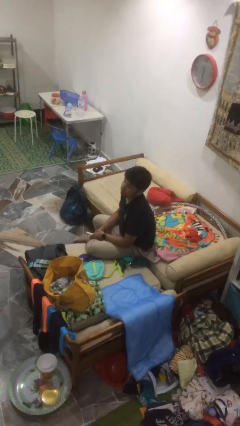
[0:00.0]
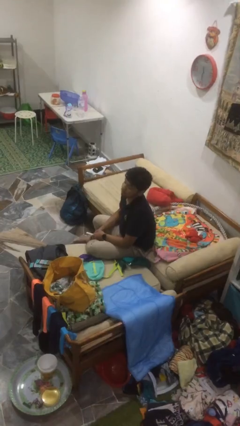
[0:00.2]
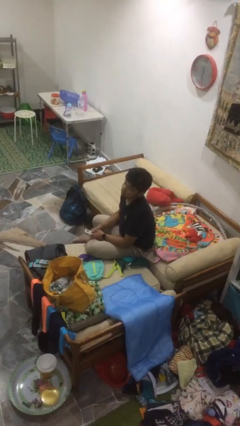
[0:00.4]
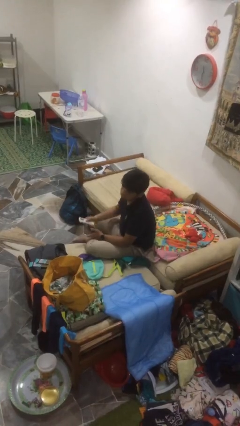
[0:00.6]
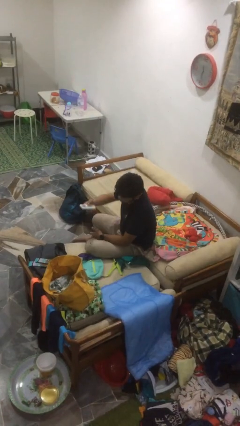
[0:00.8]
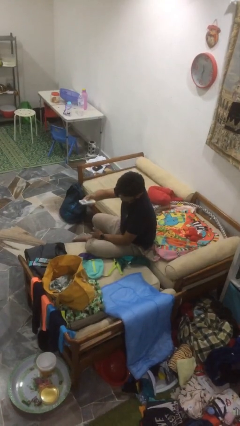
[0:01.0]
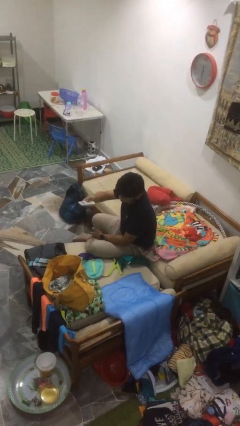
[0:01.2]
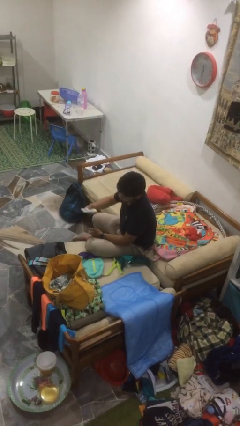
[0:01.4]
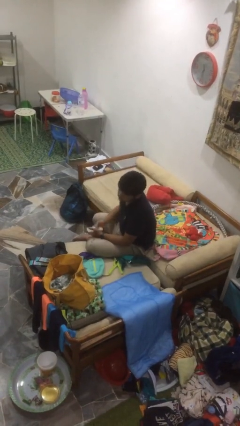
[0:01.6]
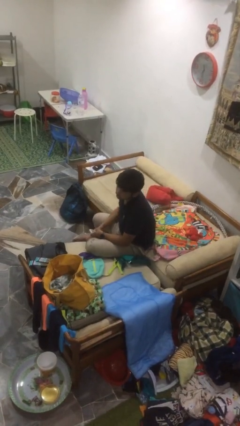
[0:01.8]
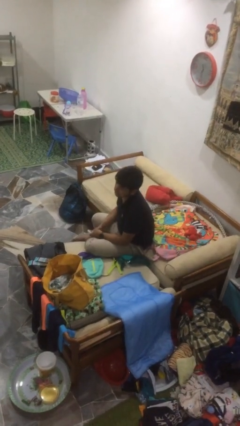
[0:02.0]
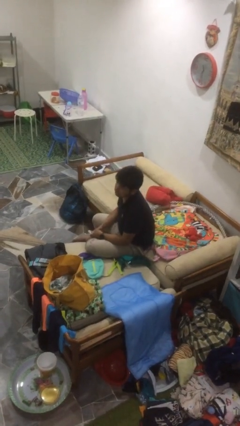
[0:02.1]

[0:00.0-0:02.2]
person uses television remote

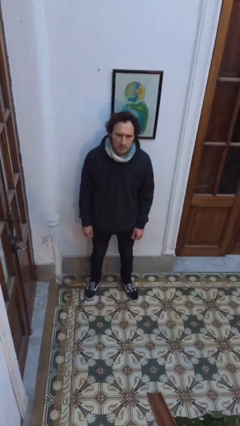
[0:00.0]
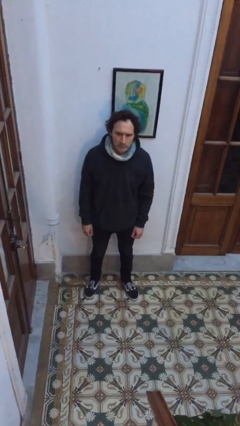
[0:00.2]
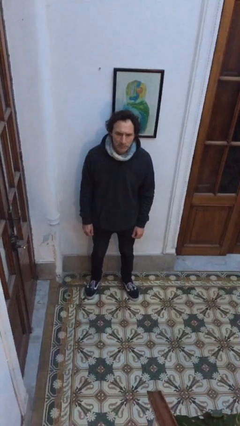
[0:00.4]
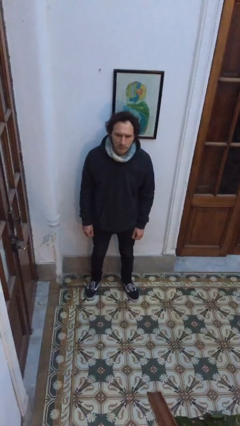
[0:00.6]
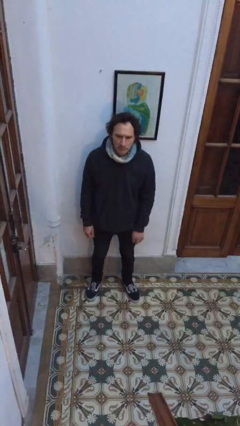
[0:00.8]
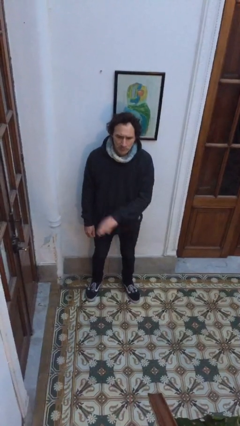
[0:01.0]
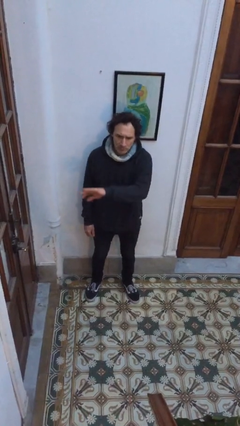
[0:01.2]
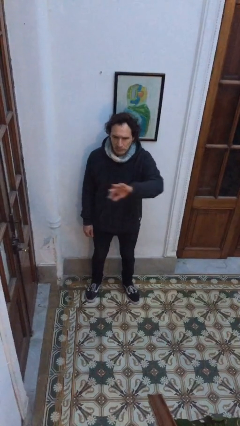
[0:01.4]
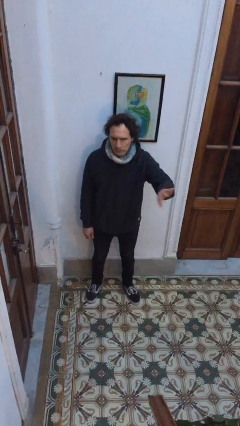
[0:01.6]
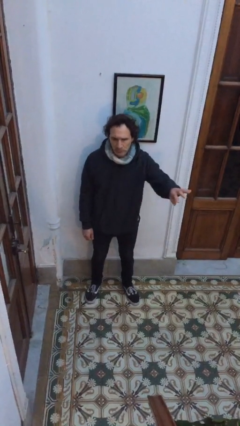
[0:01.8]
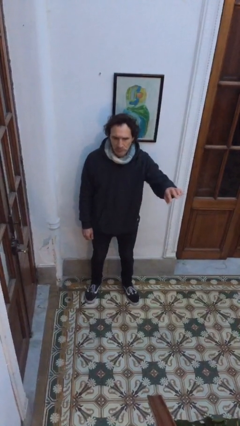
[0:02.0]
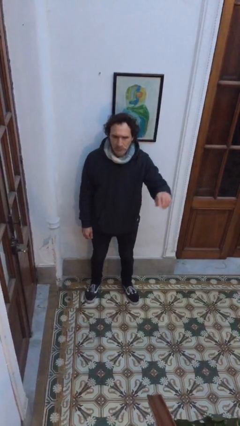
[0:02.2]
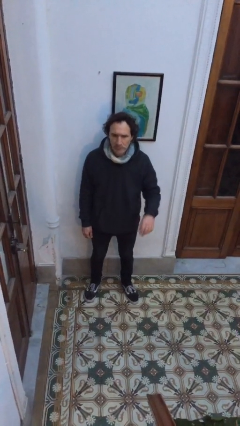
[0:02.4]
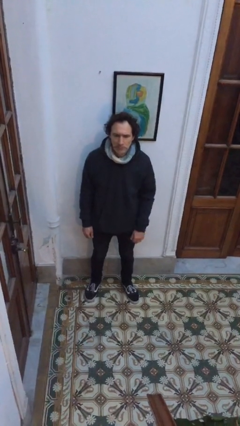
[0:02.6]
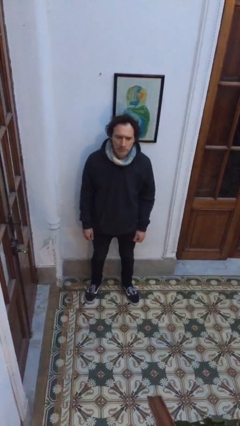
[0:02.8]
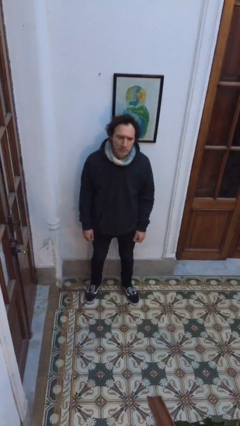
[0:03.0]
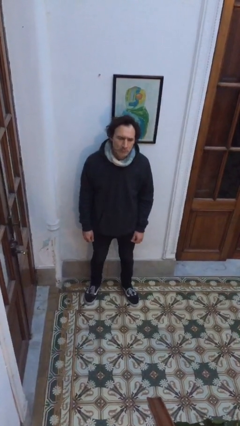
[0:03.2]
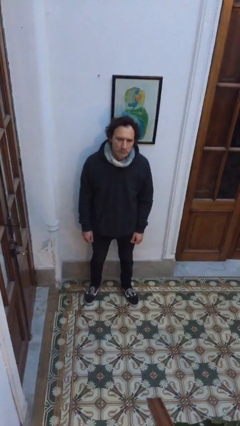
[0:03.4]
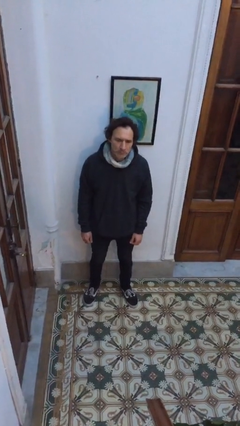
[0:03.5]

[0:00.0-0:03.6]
person gestures swipe left

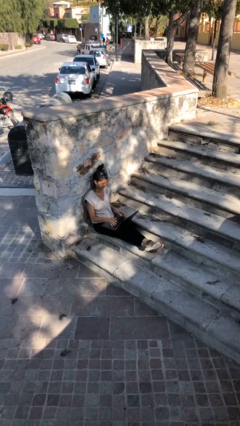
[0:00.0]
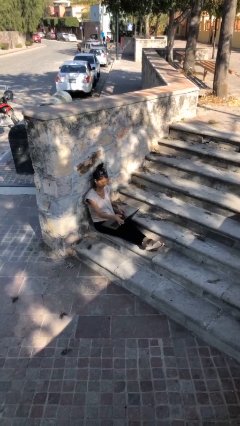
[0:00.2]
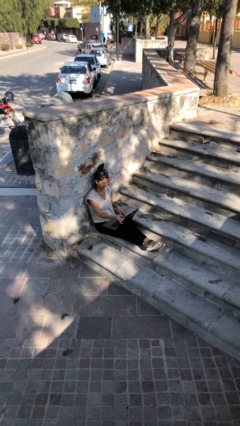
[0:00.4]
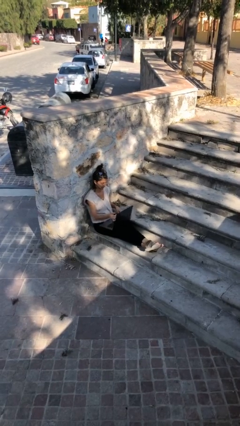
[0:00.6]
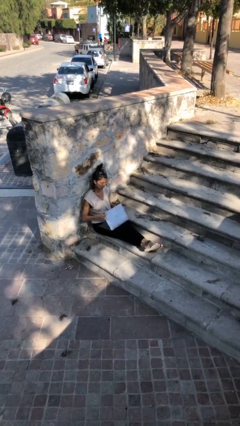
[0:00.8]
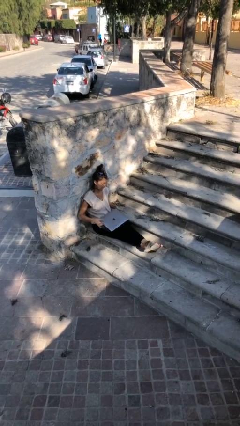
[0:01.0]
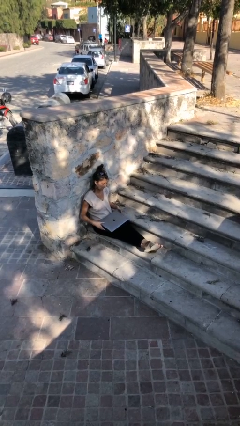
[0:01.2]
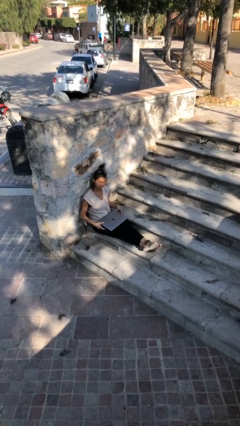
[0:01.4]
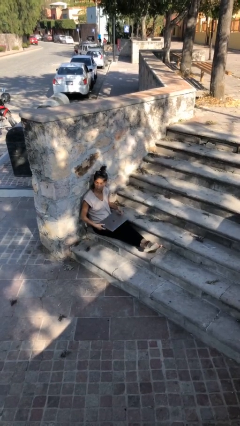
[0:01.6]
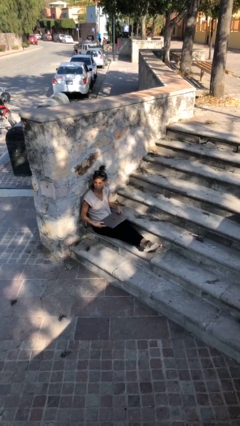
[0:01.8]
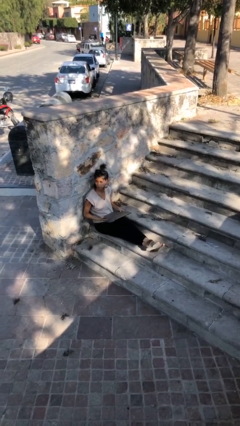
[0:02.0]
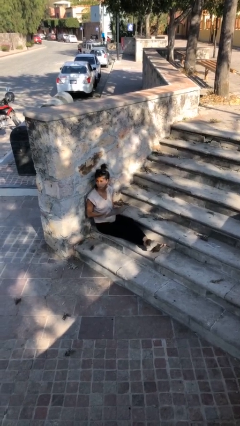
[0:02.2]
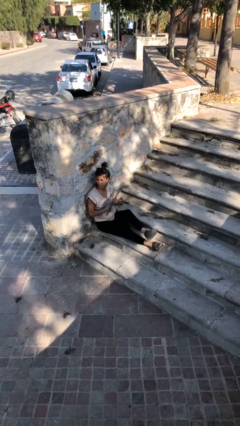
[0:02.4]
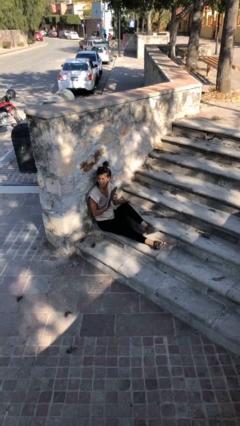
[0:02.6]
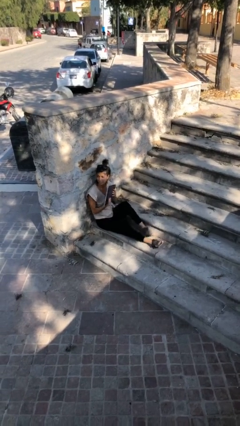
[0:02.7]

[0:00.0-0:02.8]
person interacts with laptop

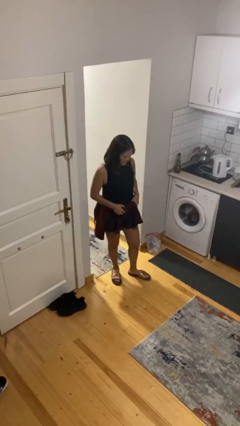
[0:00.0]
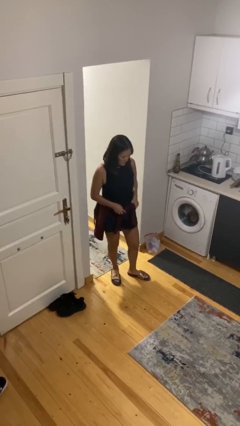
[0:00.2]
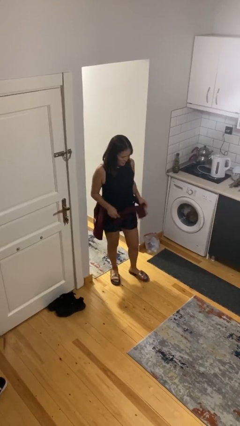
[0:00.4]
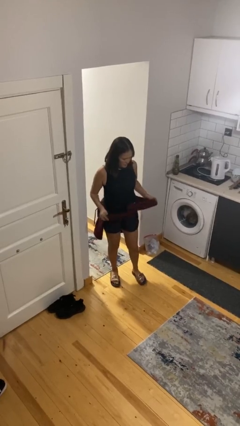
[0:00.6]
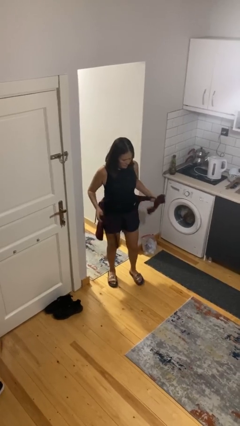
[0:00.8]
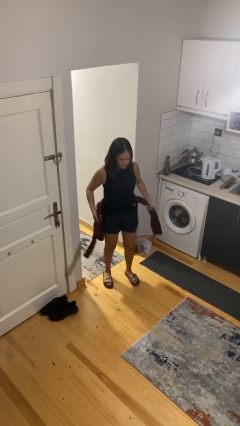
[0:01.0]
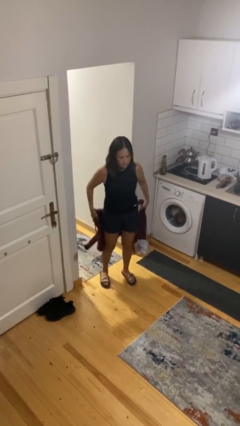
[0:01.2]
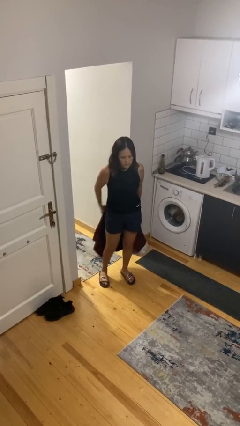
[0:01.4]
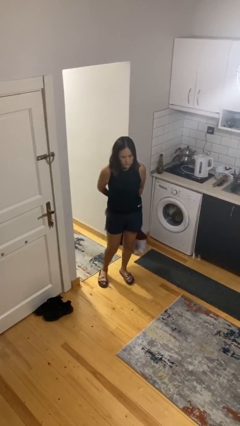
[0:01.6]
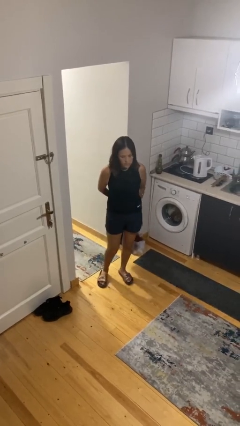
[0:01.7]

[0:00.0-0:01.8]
person unties jacket around waist

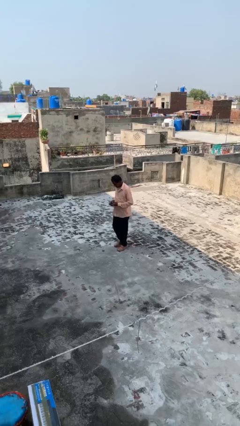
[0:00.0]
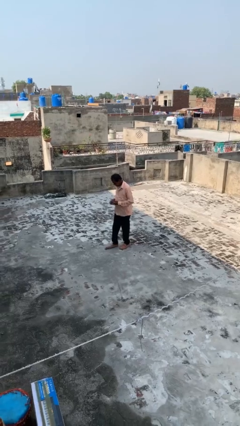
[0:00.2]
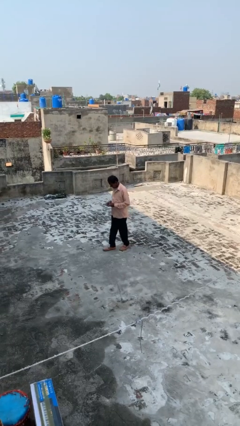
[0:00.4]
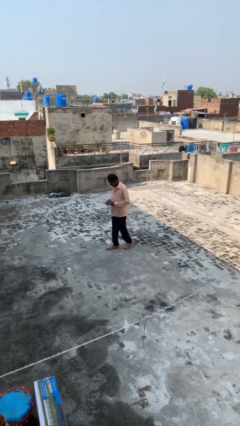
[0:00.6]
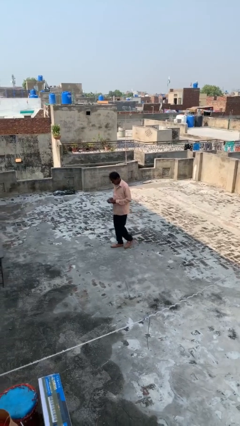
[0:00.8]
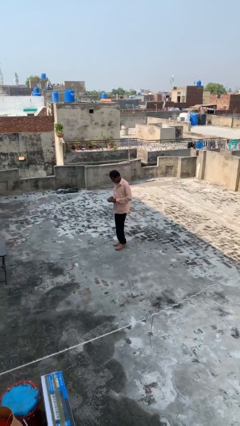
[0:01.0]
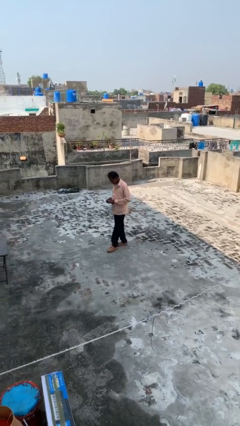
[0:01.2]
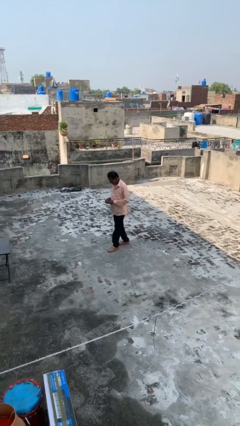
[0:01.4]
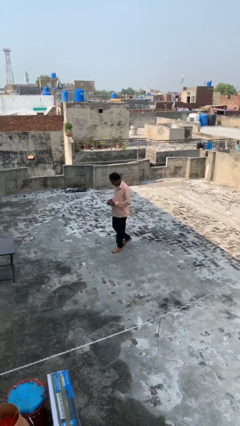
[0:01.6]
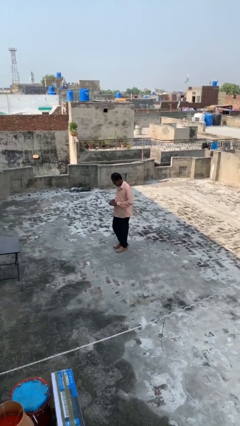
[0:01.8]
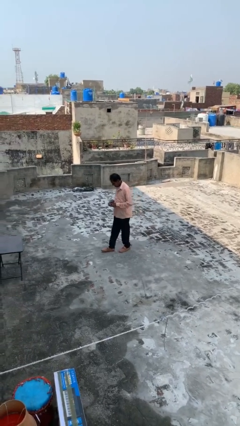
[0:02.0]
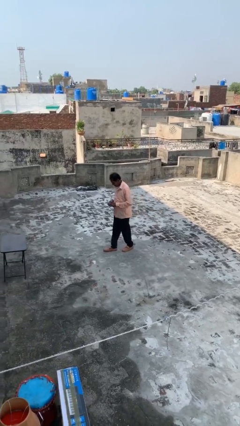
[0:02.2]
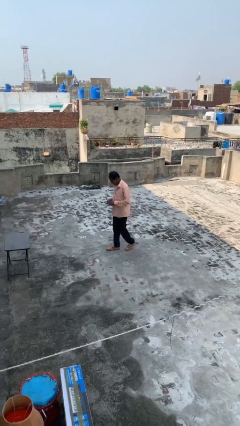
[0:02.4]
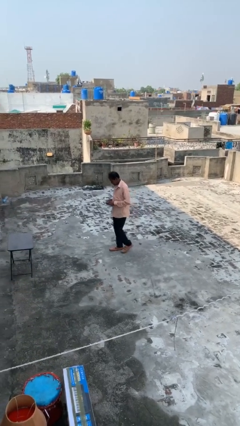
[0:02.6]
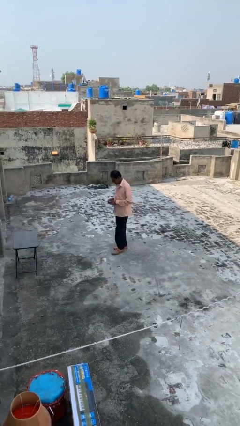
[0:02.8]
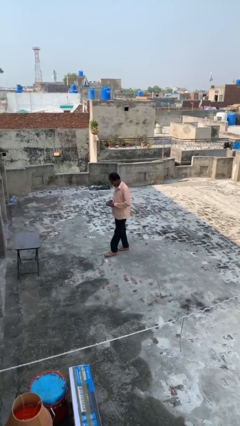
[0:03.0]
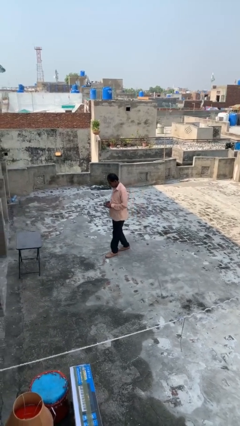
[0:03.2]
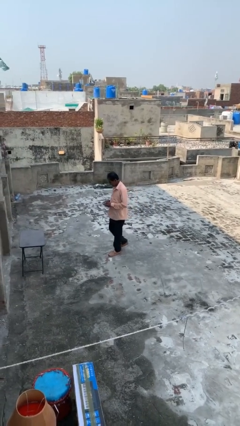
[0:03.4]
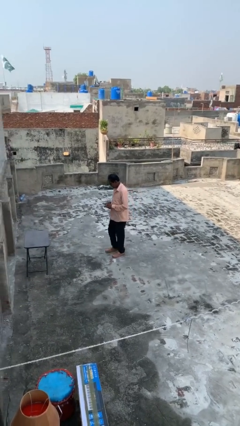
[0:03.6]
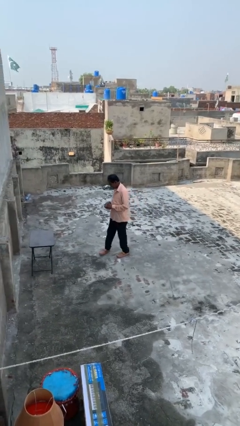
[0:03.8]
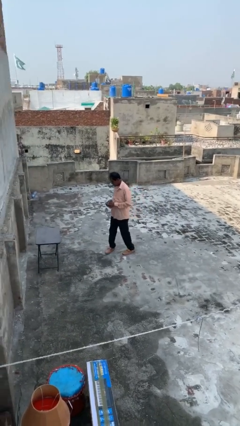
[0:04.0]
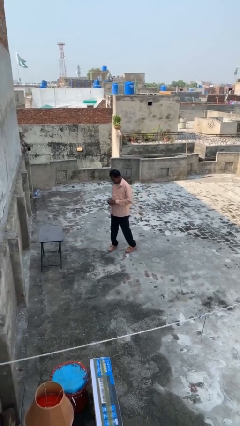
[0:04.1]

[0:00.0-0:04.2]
person texts on phone

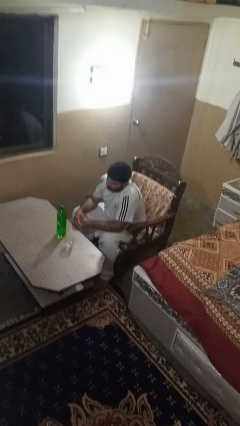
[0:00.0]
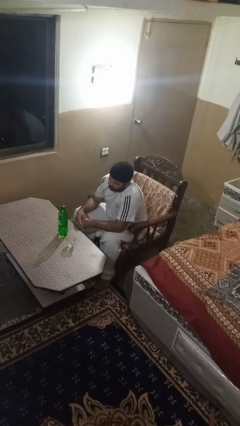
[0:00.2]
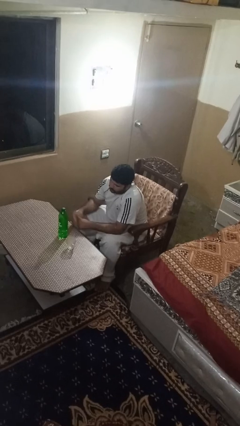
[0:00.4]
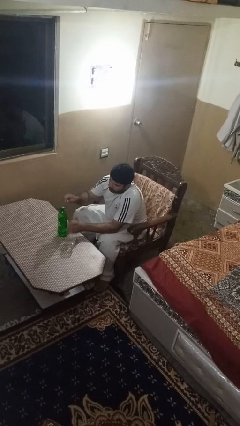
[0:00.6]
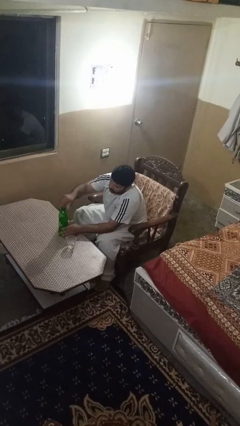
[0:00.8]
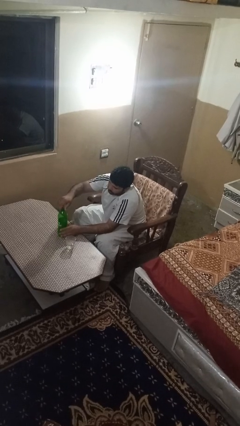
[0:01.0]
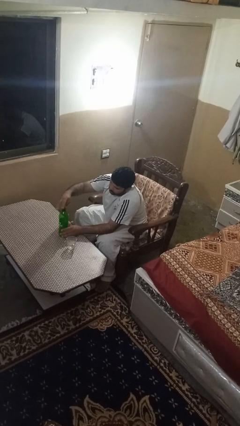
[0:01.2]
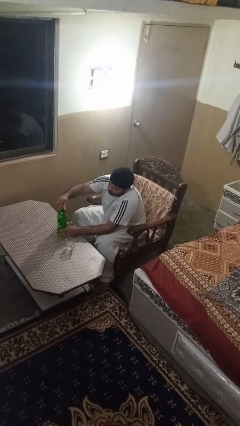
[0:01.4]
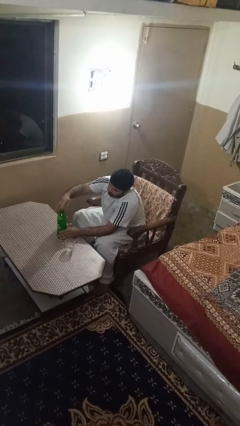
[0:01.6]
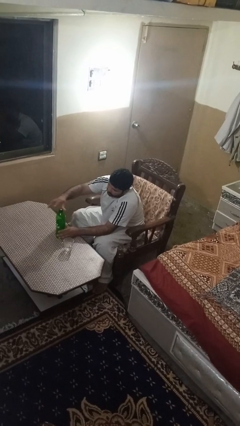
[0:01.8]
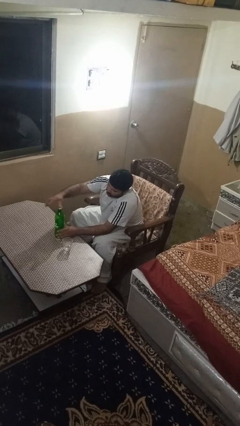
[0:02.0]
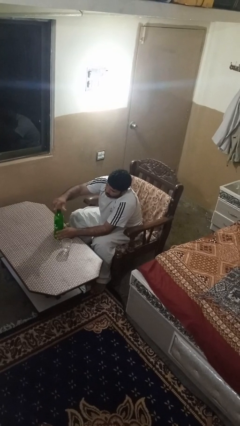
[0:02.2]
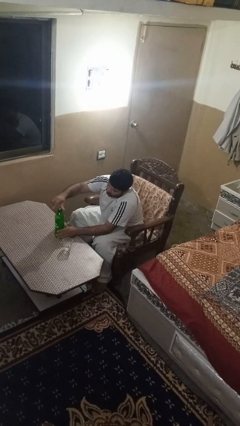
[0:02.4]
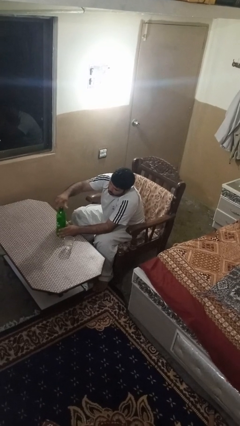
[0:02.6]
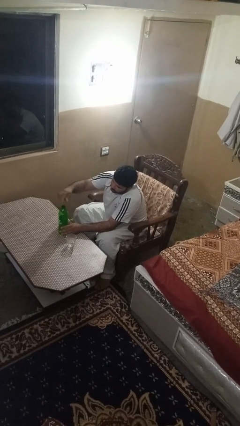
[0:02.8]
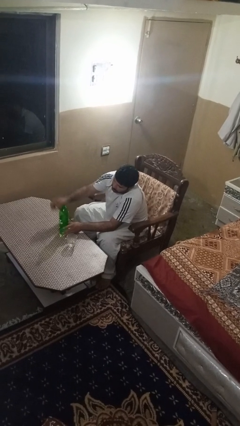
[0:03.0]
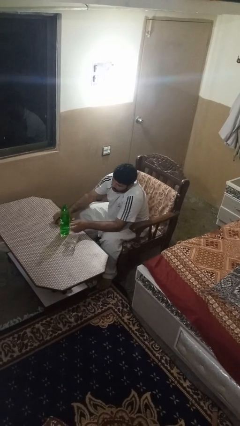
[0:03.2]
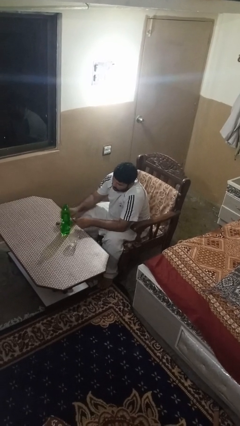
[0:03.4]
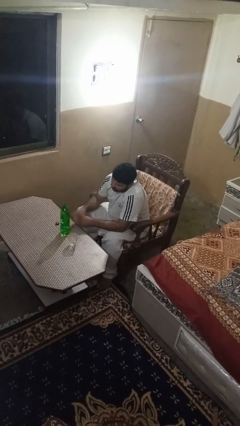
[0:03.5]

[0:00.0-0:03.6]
person unscrews lid from bottle
